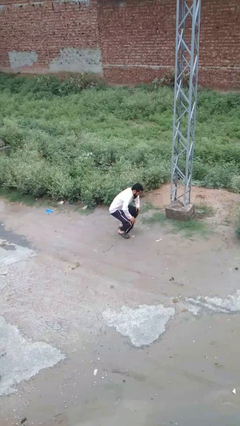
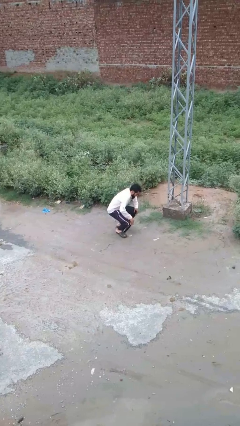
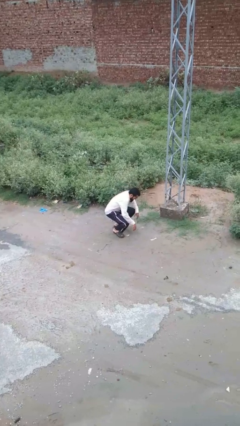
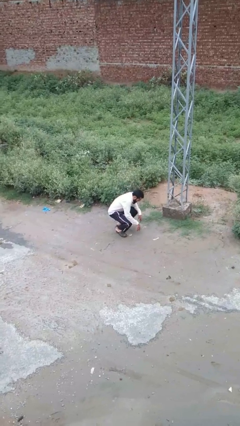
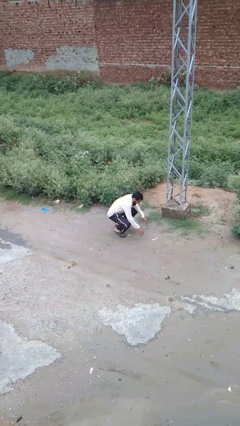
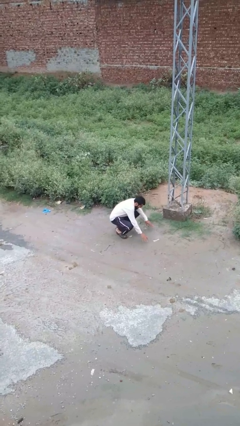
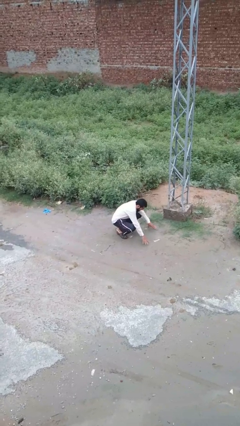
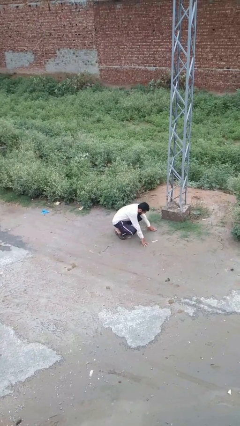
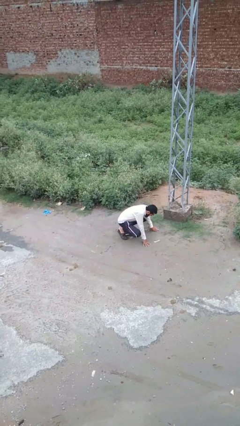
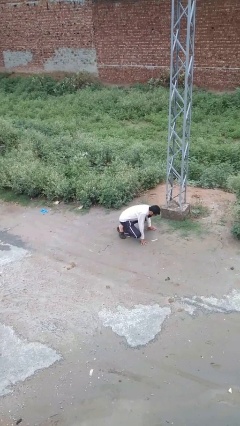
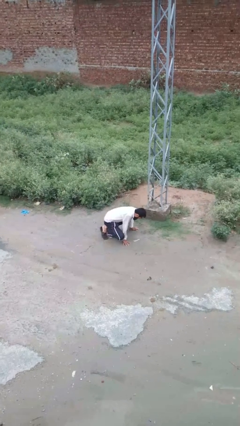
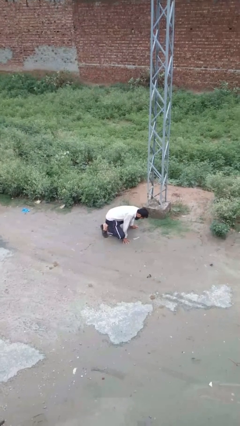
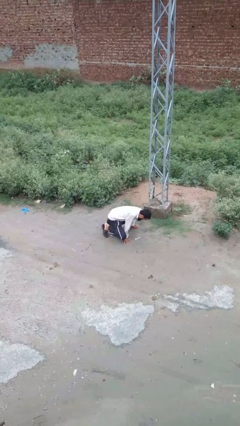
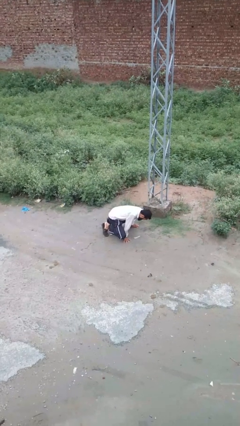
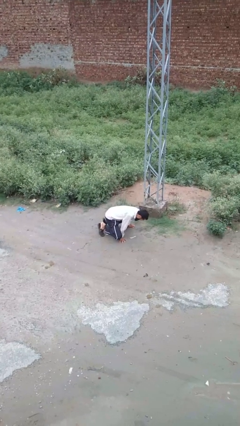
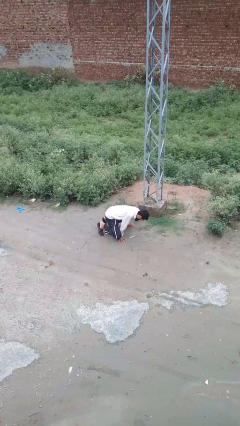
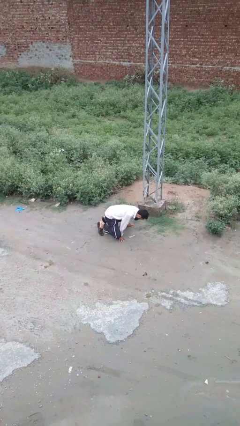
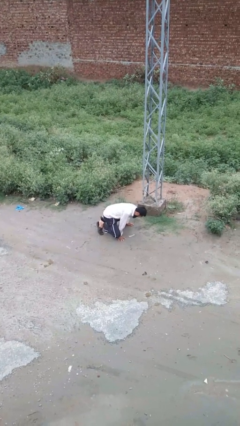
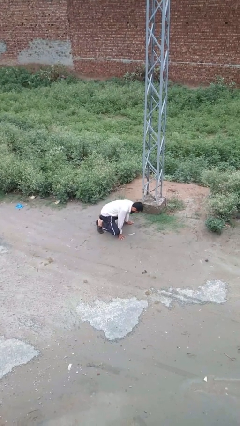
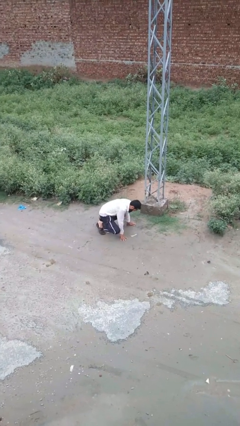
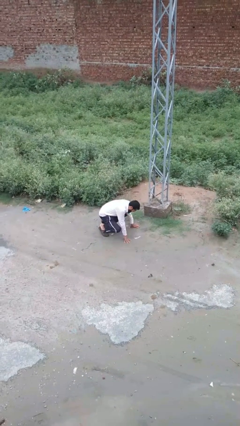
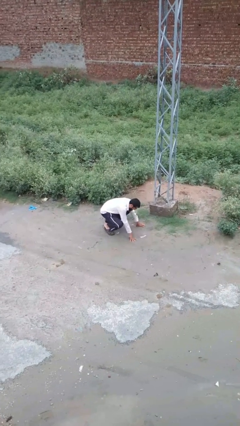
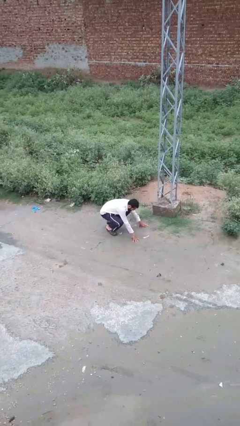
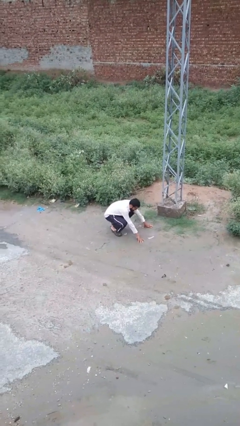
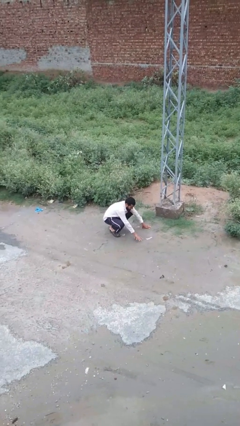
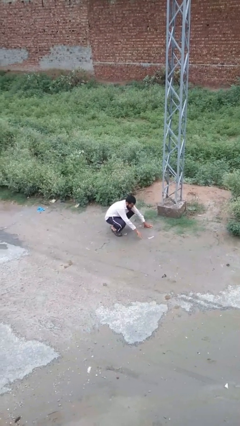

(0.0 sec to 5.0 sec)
person lies down on floor

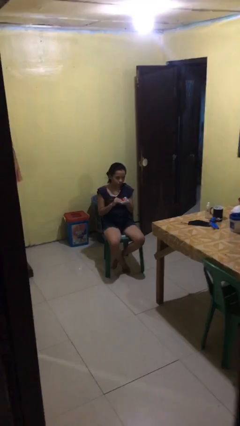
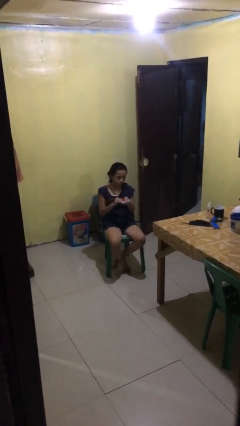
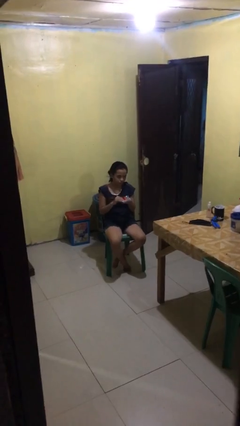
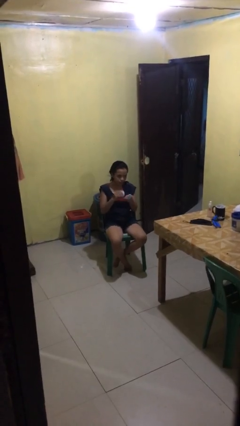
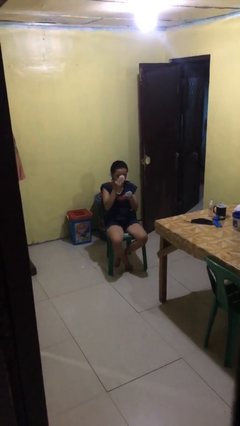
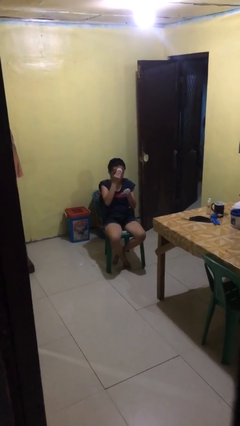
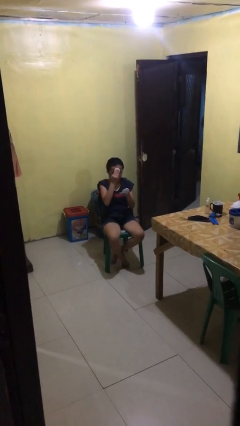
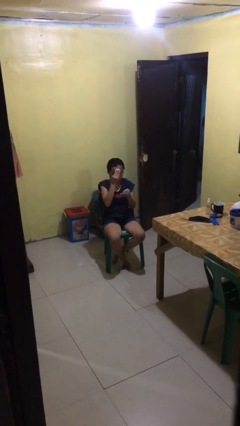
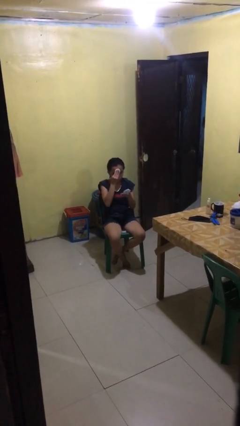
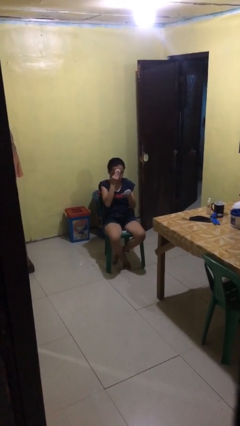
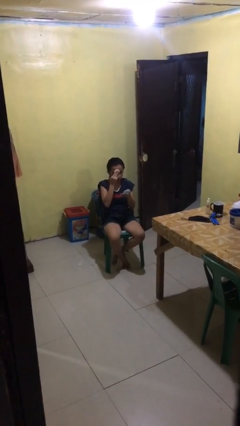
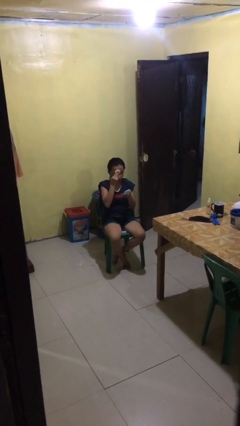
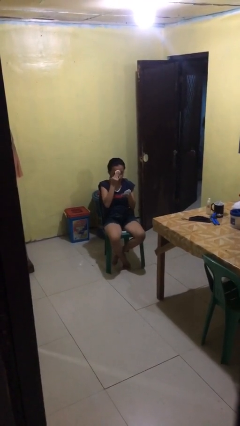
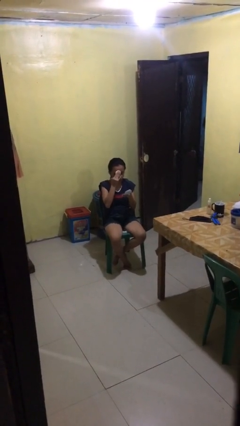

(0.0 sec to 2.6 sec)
person applies foundation makeup

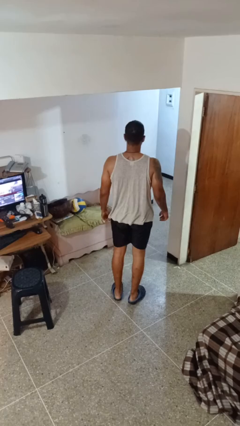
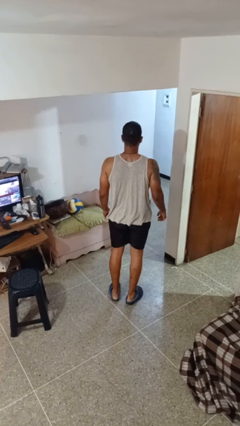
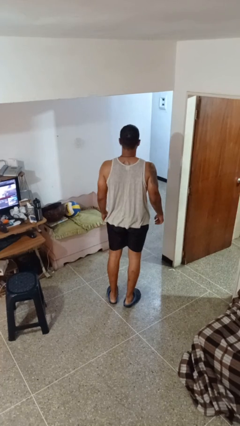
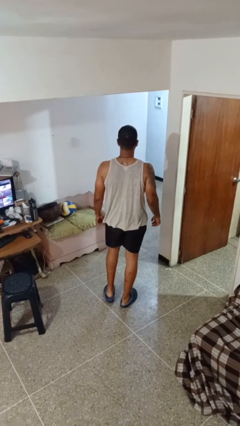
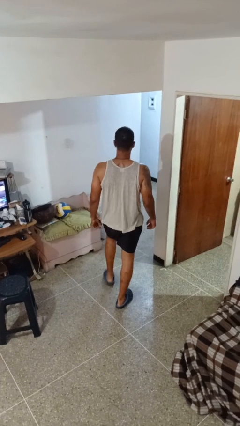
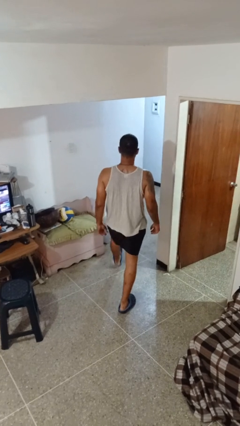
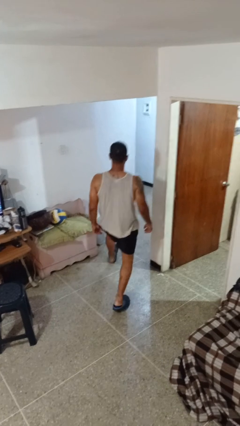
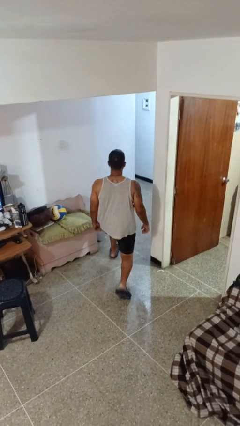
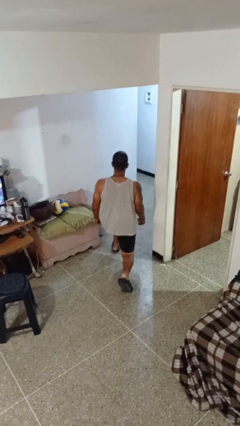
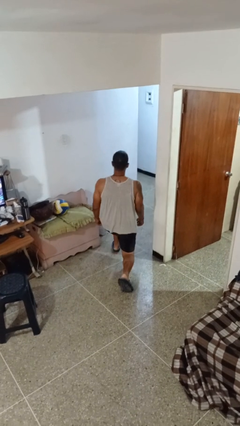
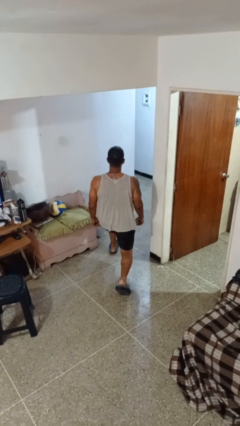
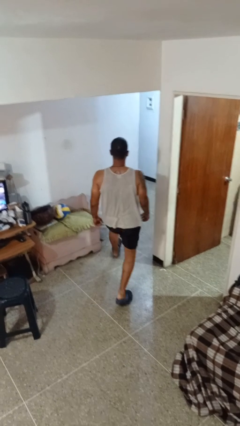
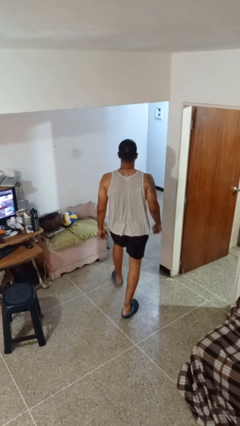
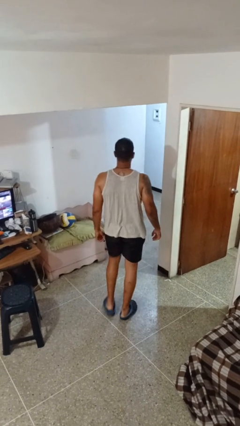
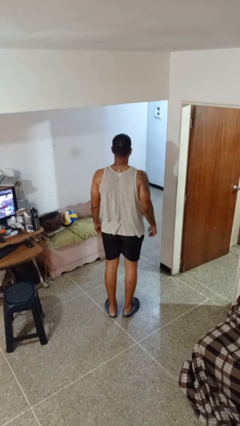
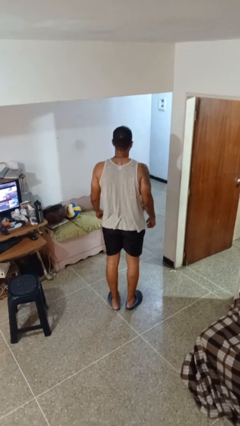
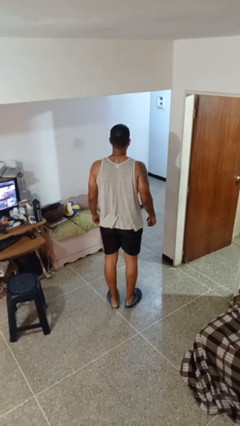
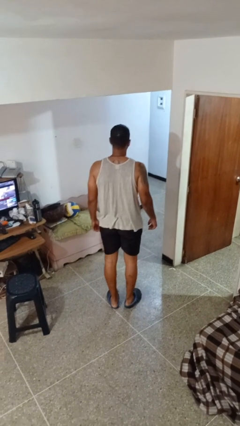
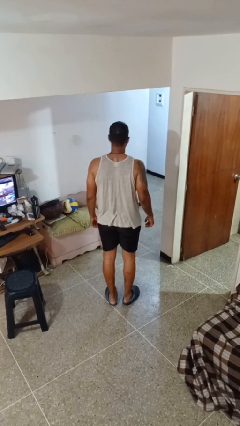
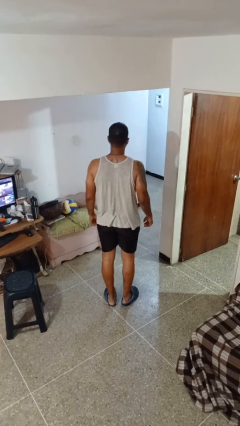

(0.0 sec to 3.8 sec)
person exercises with lunges

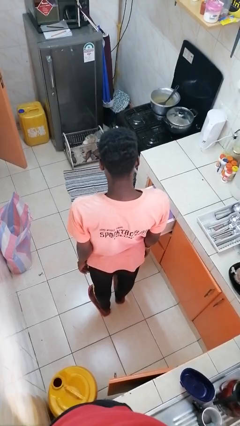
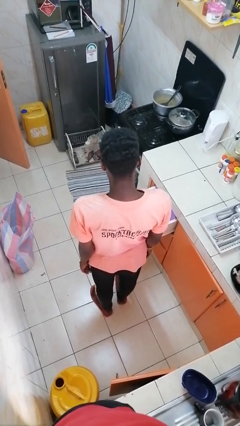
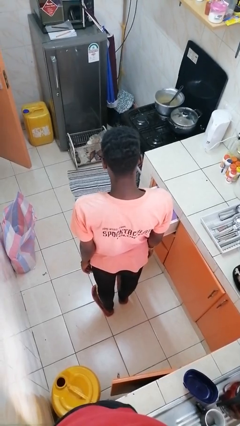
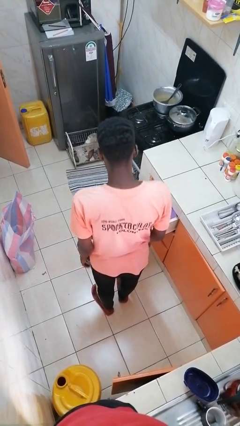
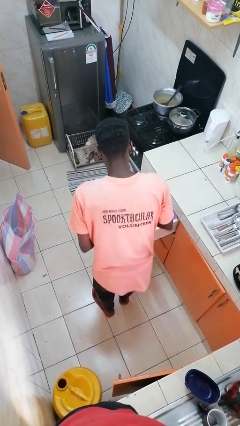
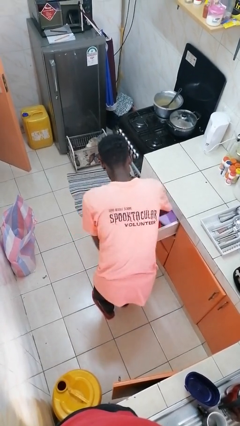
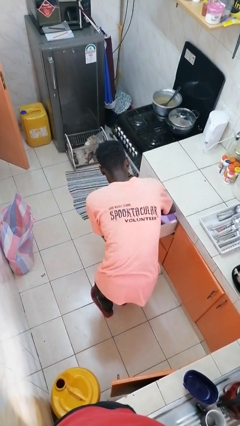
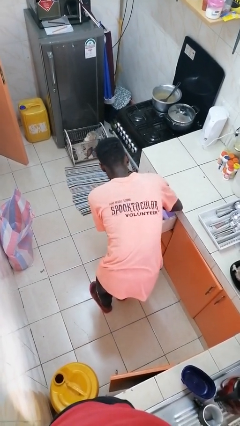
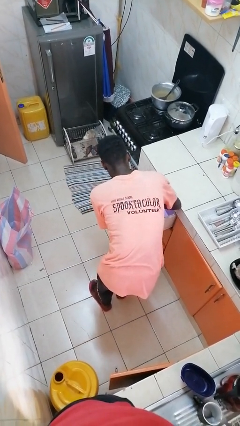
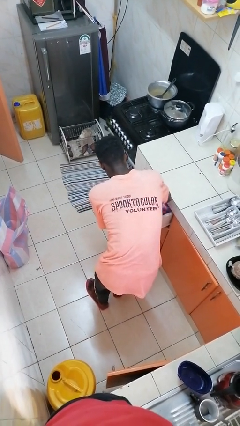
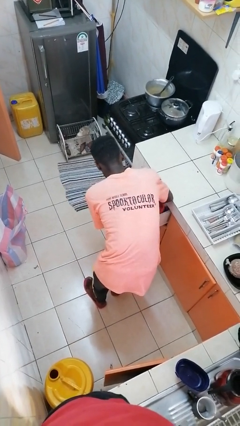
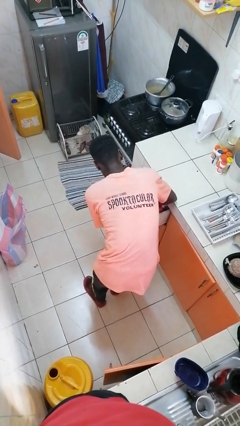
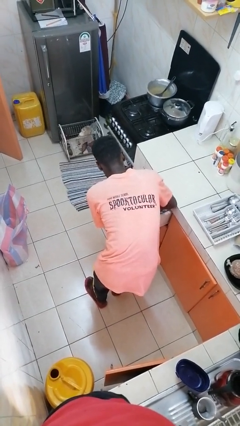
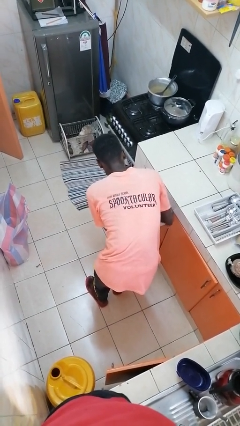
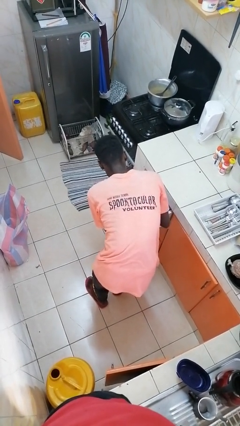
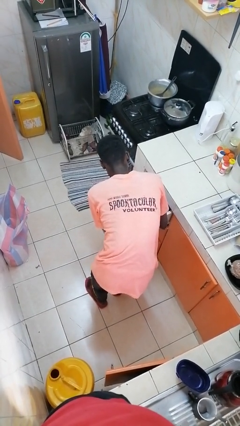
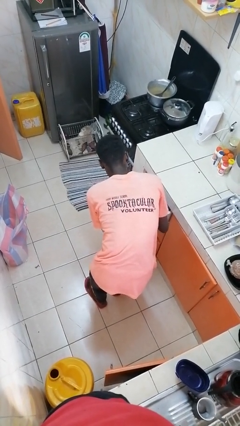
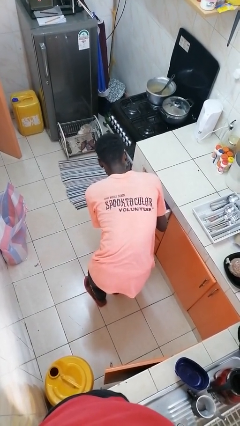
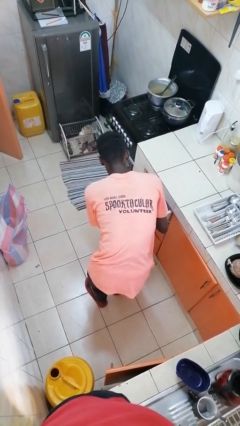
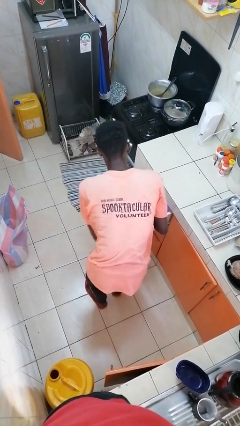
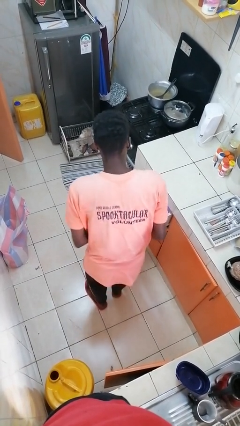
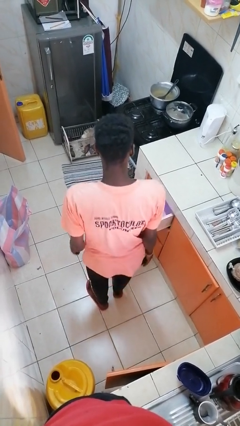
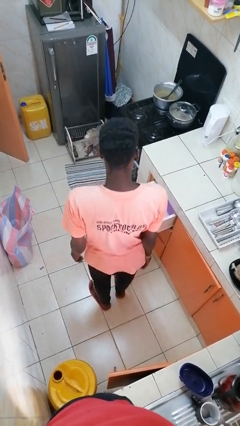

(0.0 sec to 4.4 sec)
person searches in kitchen drawer

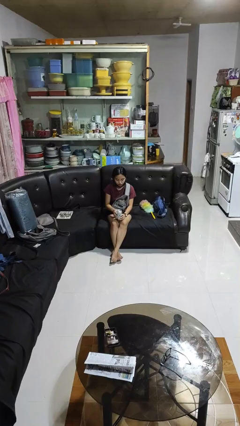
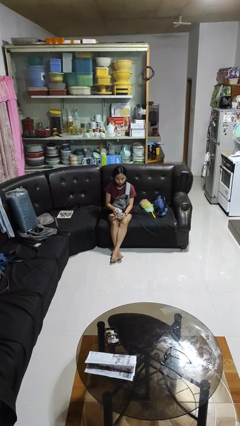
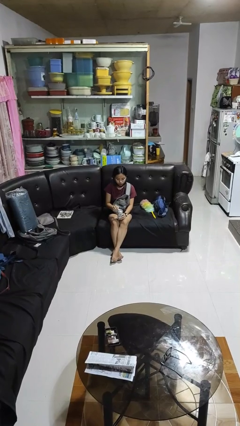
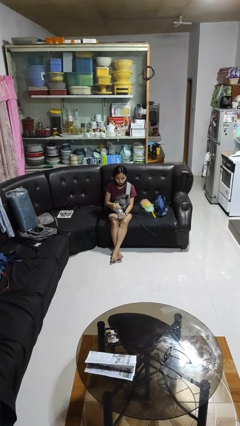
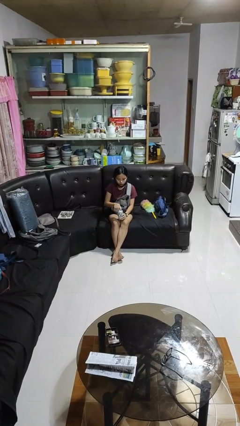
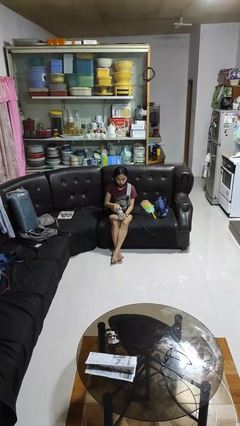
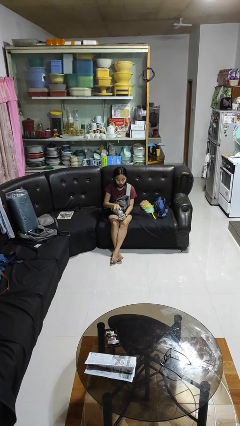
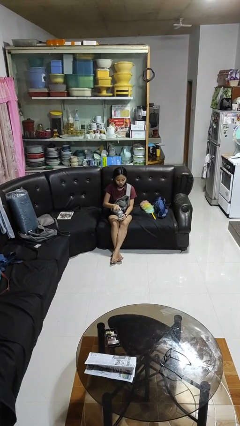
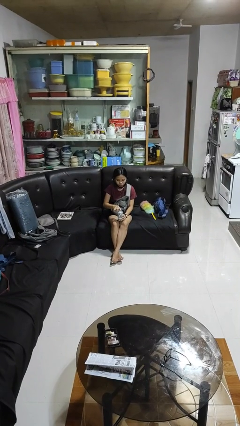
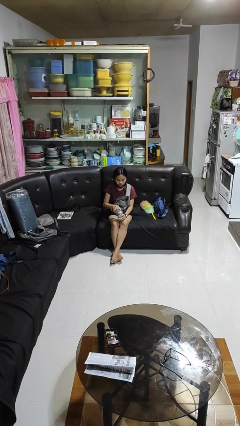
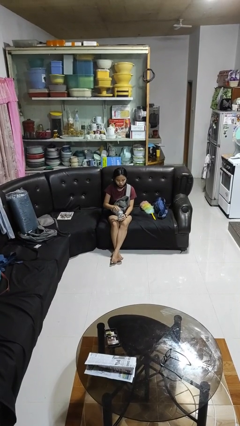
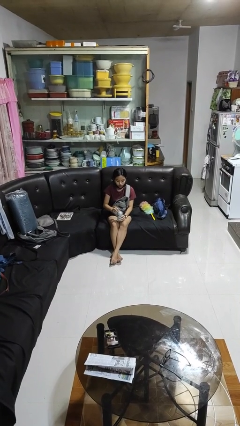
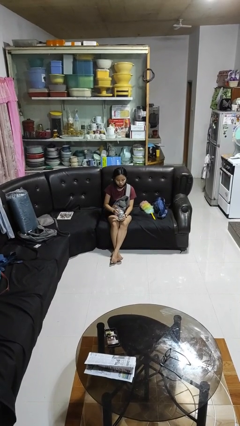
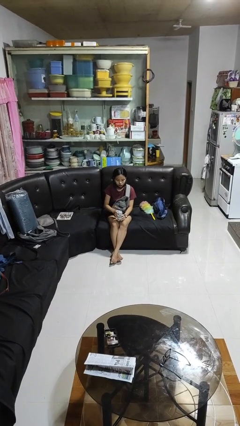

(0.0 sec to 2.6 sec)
person opens beverage can
